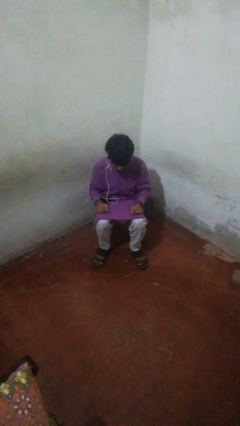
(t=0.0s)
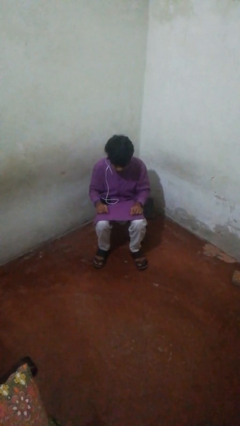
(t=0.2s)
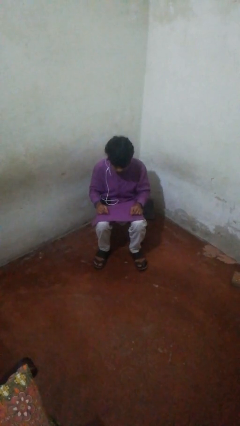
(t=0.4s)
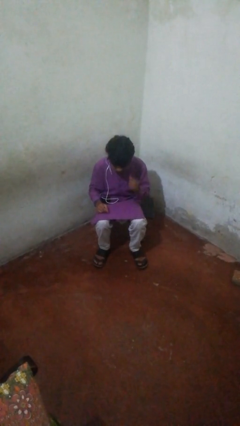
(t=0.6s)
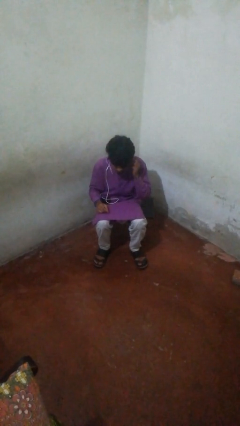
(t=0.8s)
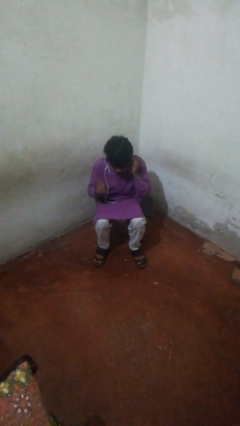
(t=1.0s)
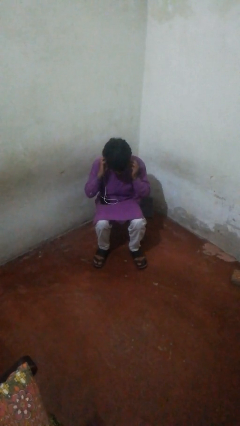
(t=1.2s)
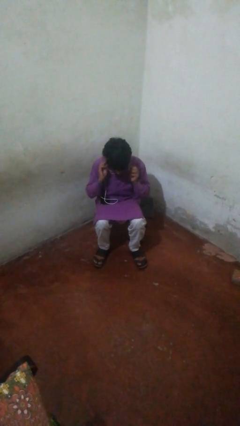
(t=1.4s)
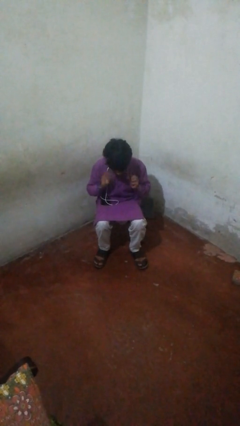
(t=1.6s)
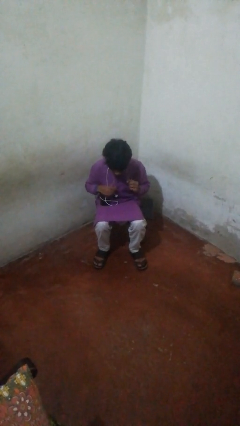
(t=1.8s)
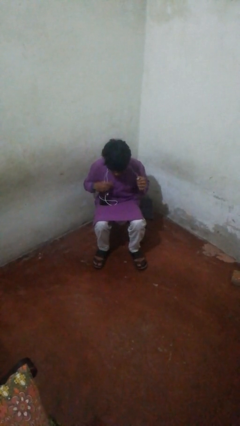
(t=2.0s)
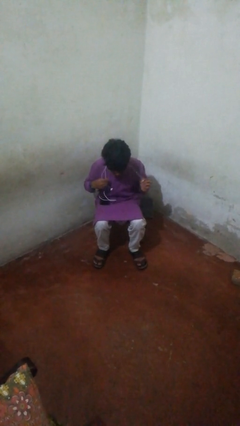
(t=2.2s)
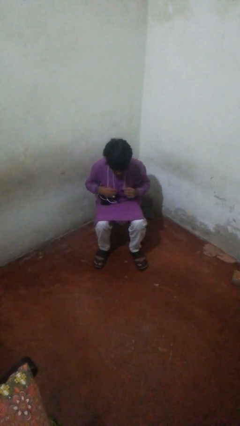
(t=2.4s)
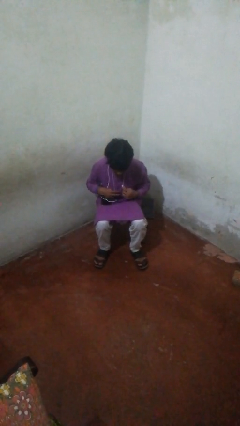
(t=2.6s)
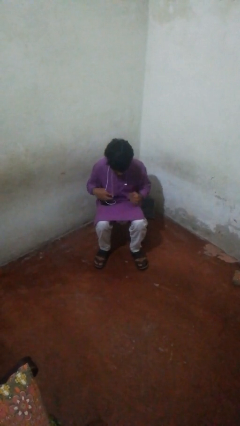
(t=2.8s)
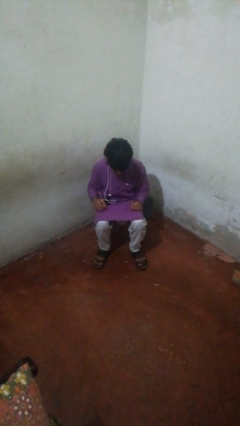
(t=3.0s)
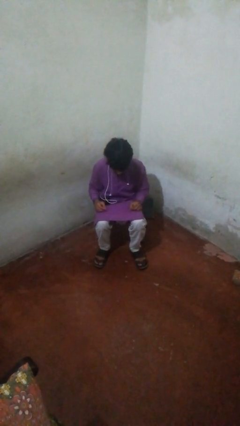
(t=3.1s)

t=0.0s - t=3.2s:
person takes off headphones

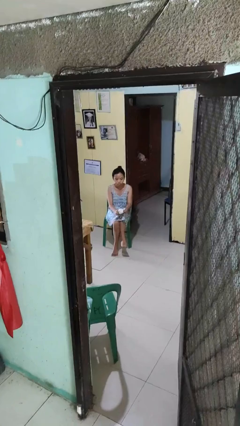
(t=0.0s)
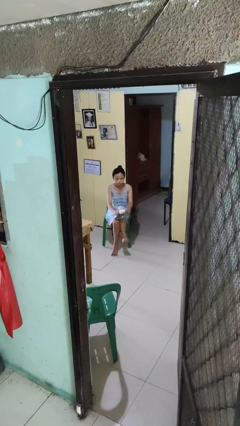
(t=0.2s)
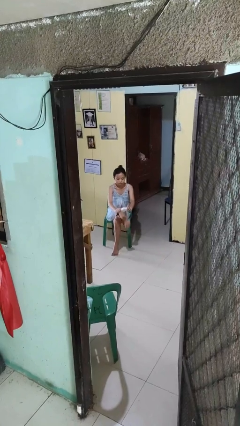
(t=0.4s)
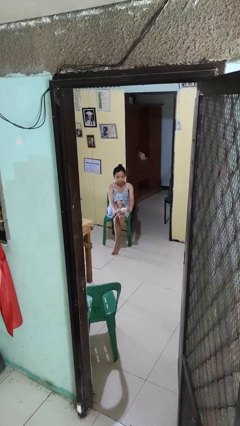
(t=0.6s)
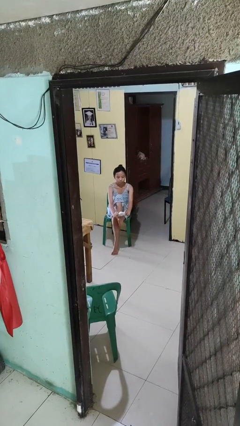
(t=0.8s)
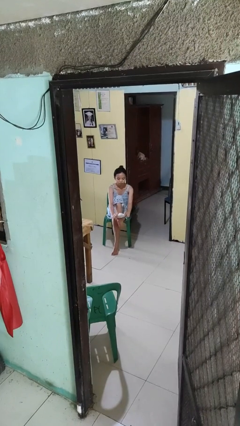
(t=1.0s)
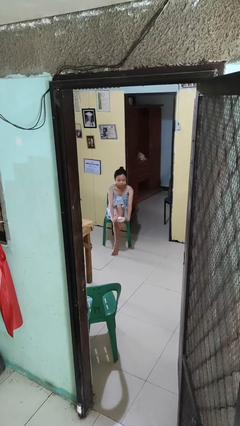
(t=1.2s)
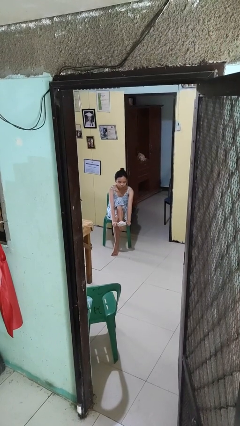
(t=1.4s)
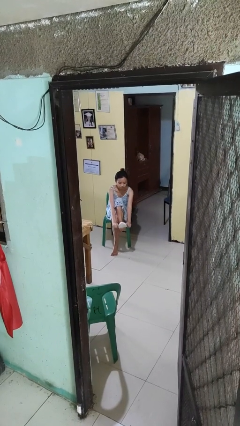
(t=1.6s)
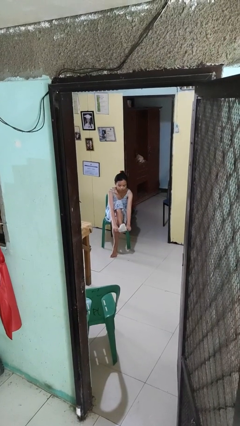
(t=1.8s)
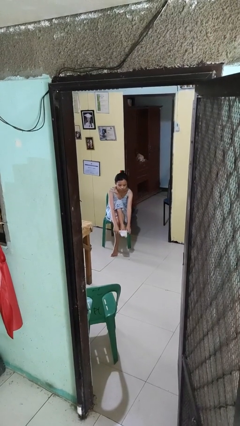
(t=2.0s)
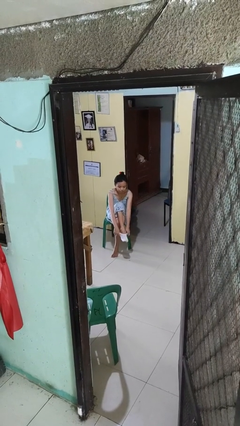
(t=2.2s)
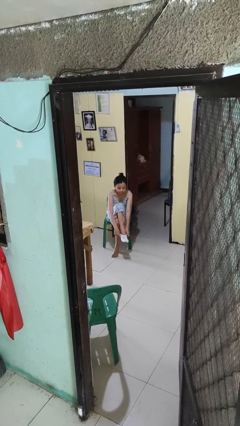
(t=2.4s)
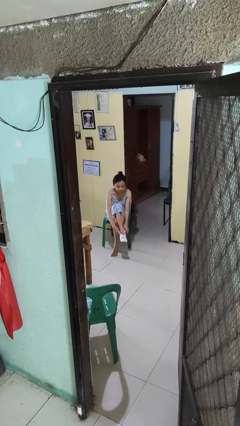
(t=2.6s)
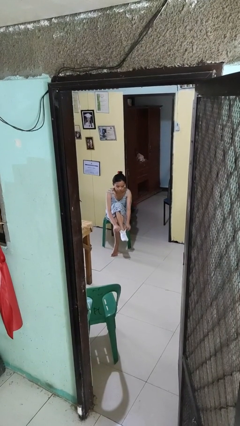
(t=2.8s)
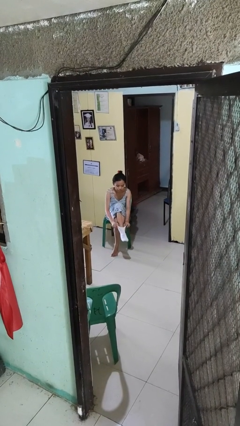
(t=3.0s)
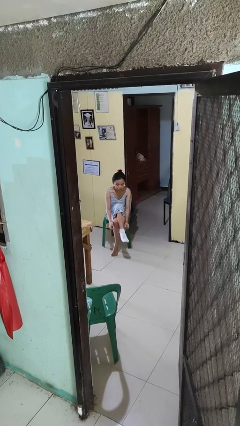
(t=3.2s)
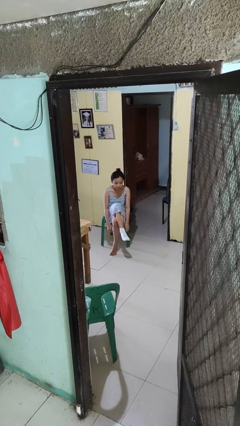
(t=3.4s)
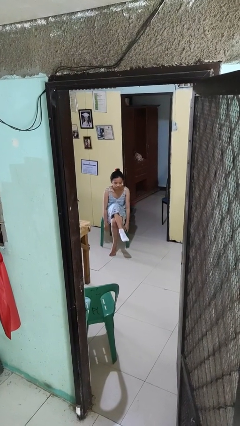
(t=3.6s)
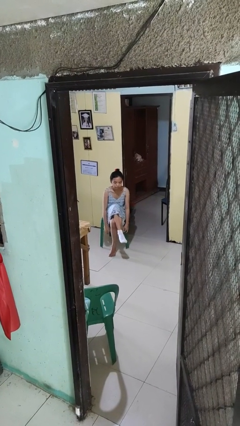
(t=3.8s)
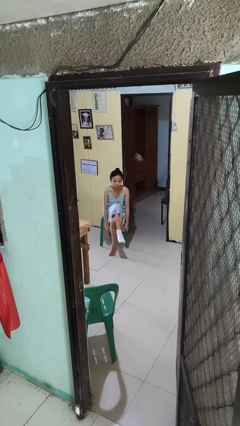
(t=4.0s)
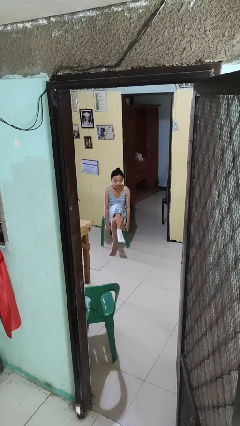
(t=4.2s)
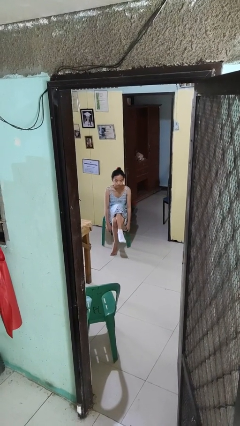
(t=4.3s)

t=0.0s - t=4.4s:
person puts on socks

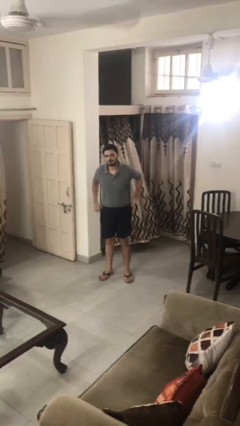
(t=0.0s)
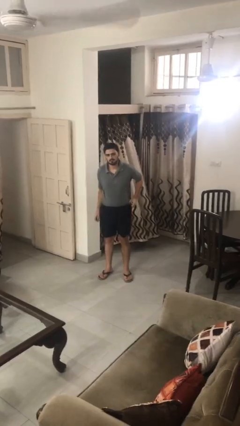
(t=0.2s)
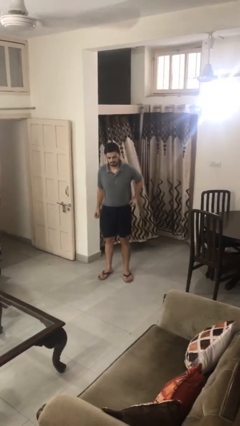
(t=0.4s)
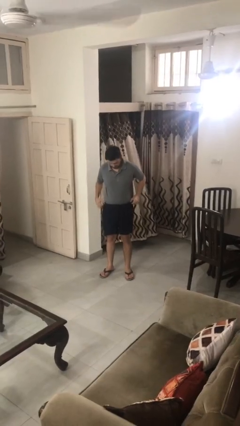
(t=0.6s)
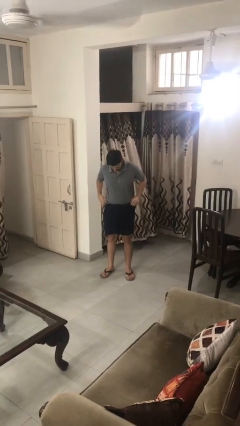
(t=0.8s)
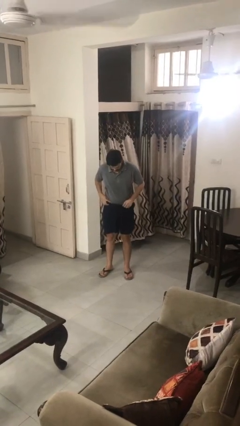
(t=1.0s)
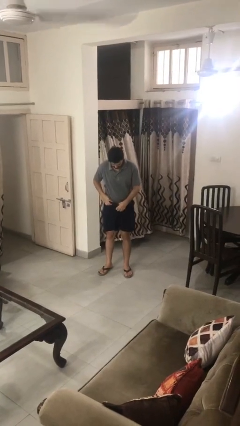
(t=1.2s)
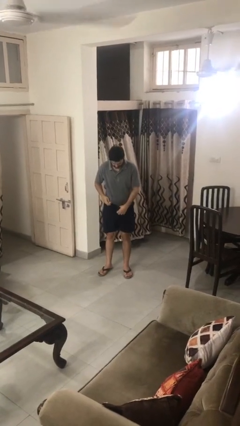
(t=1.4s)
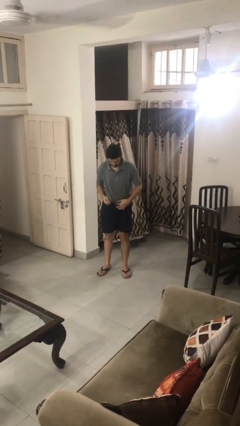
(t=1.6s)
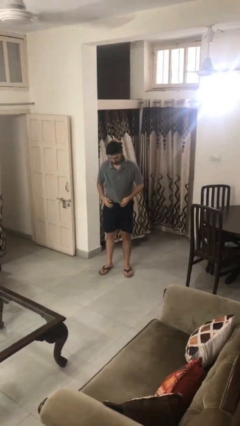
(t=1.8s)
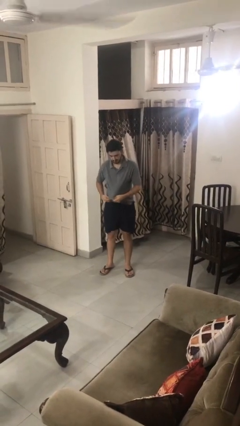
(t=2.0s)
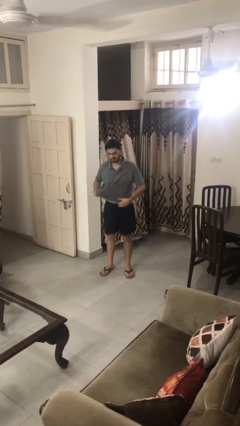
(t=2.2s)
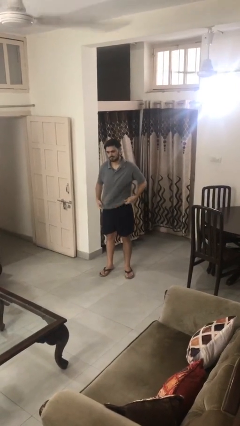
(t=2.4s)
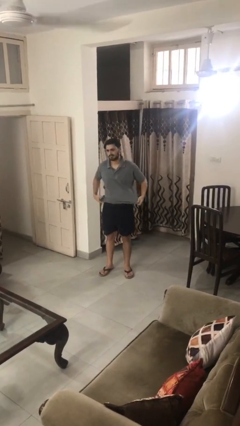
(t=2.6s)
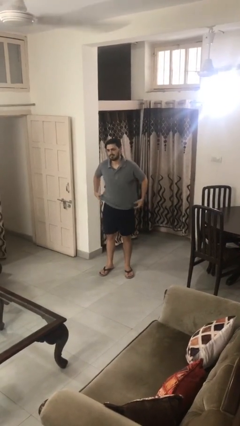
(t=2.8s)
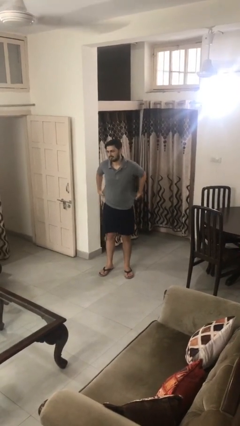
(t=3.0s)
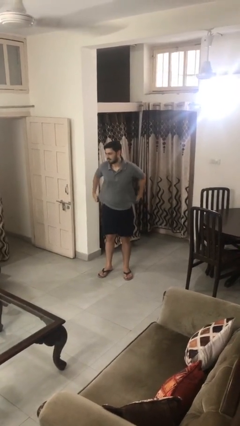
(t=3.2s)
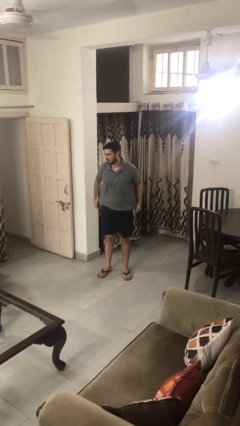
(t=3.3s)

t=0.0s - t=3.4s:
person untucks shirt

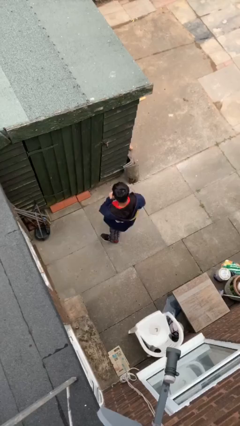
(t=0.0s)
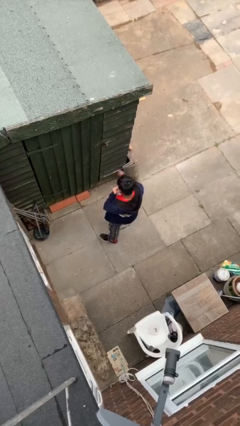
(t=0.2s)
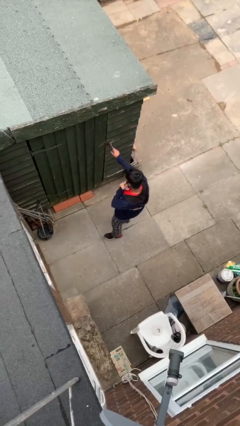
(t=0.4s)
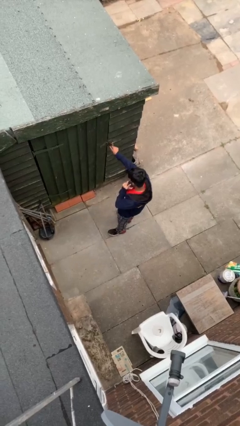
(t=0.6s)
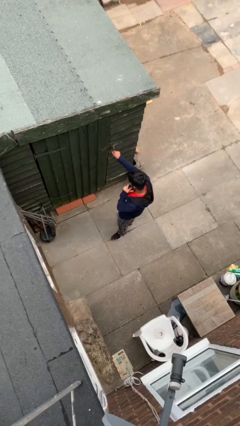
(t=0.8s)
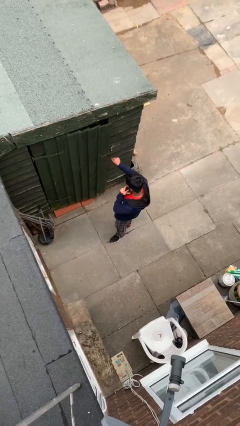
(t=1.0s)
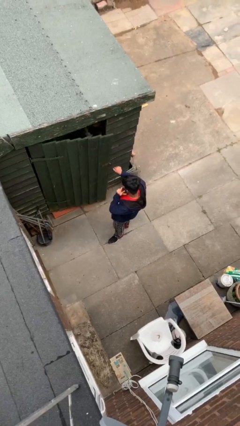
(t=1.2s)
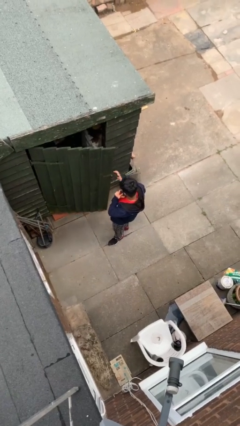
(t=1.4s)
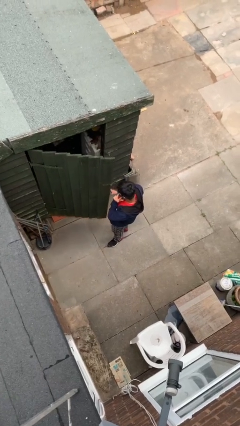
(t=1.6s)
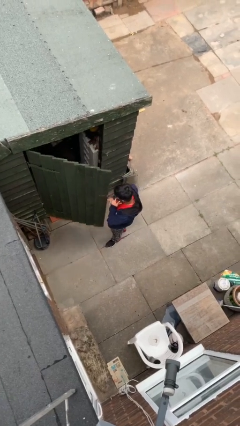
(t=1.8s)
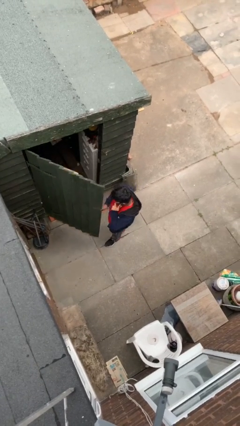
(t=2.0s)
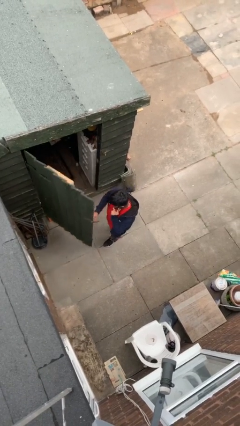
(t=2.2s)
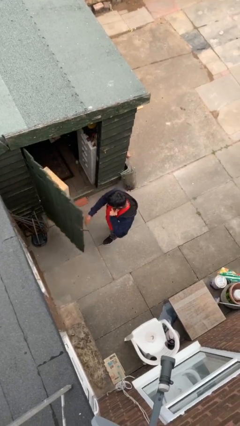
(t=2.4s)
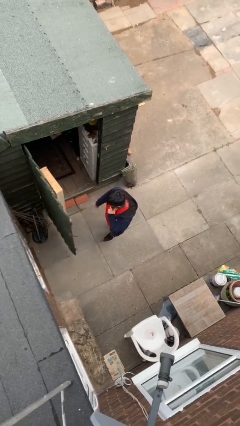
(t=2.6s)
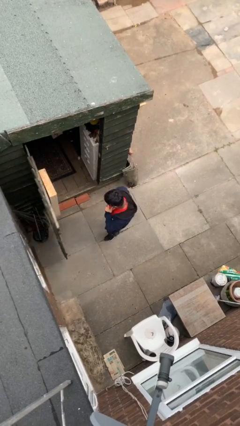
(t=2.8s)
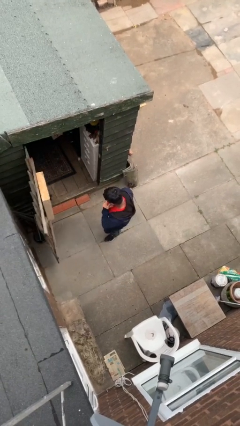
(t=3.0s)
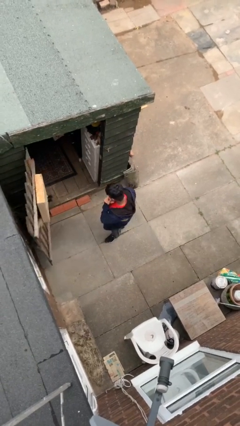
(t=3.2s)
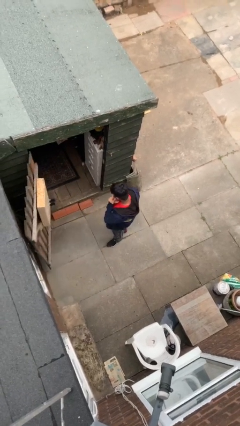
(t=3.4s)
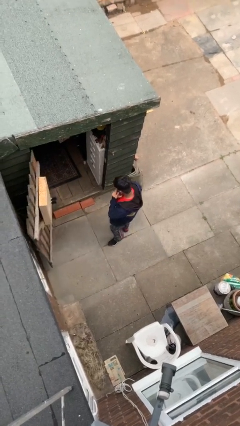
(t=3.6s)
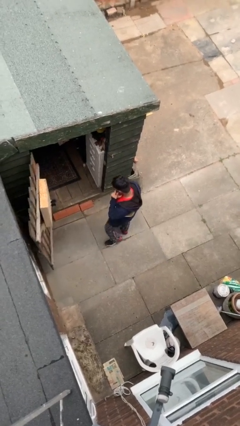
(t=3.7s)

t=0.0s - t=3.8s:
person opens facility door

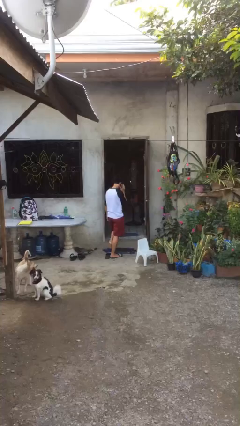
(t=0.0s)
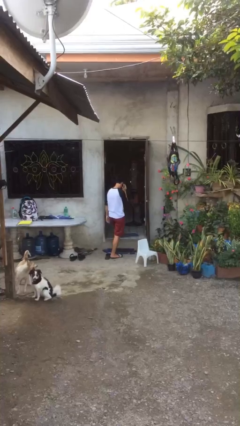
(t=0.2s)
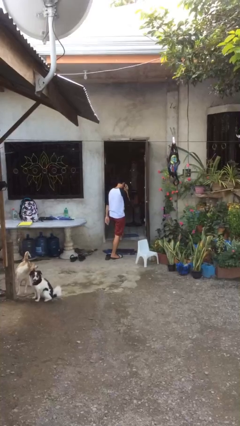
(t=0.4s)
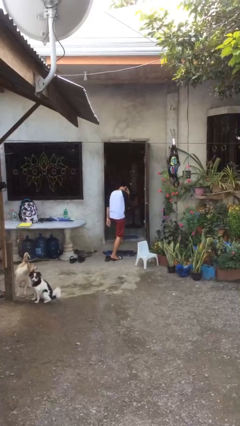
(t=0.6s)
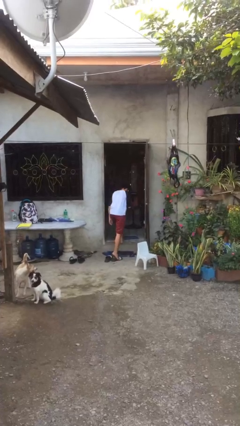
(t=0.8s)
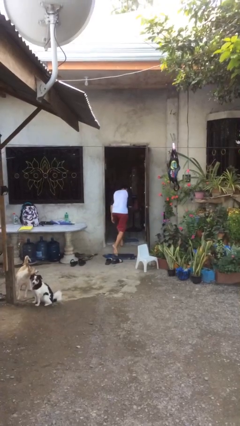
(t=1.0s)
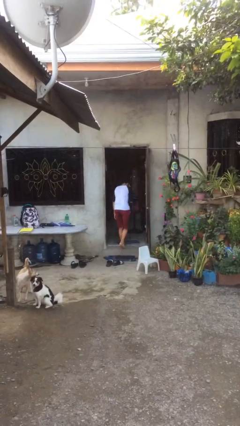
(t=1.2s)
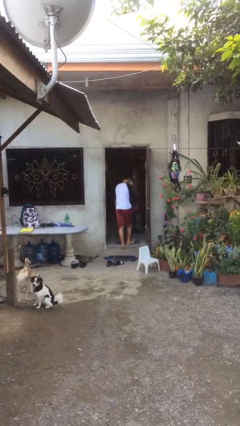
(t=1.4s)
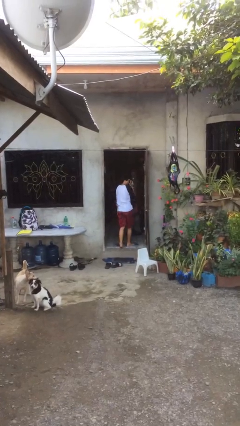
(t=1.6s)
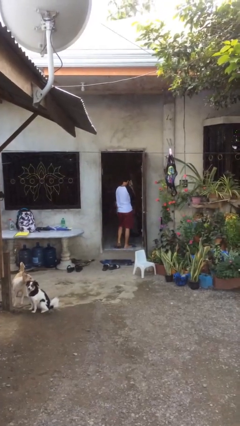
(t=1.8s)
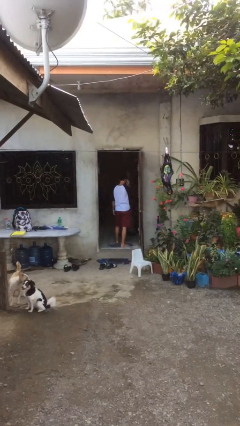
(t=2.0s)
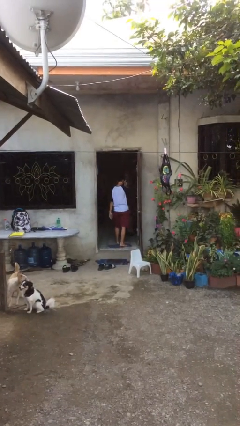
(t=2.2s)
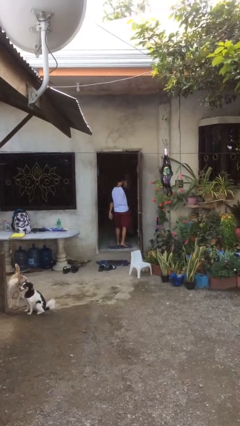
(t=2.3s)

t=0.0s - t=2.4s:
person exits scene through structure

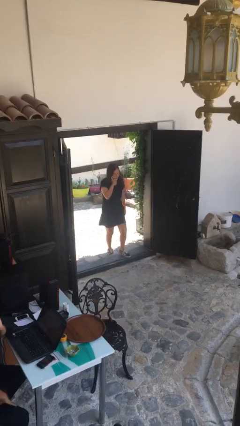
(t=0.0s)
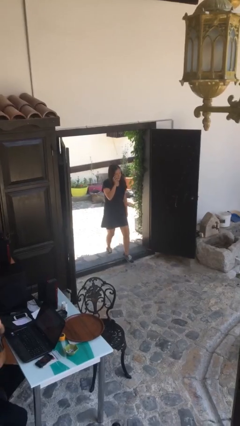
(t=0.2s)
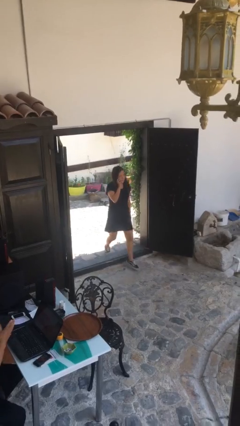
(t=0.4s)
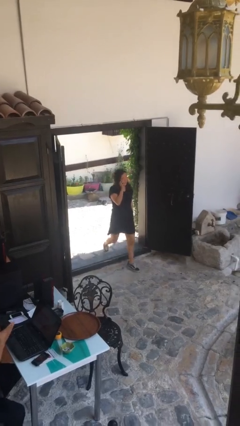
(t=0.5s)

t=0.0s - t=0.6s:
person enters scene through structure
